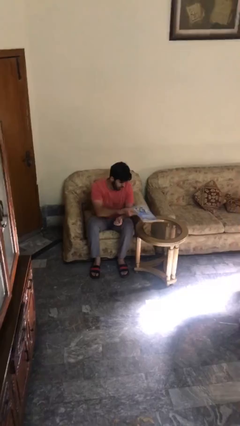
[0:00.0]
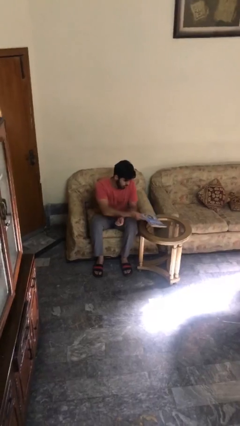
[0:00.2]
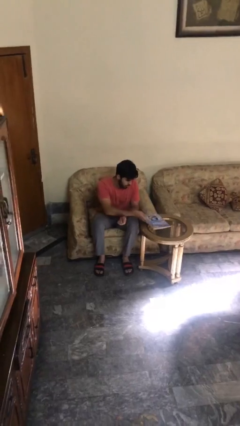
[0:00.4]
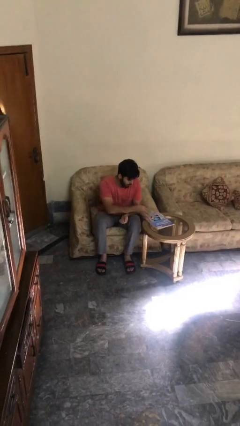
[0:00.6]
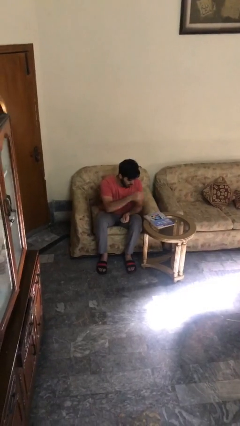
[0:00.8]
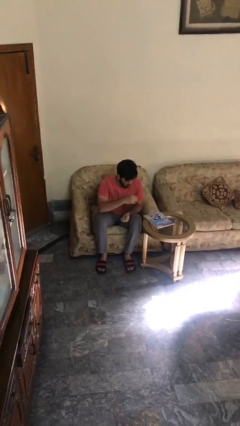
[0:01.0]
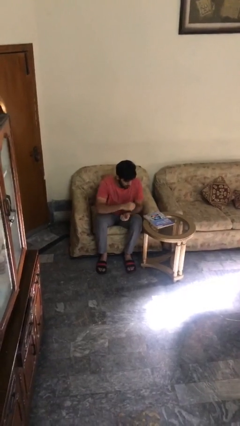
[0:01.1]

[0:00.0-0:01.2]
person puts down object on table

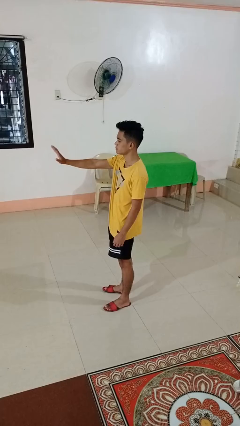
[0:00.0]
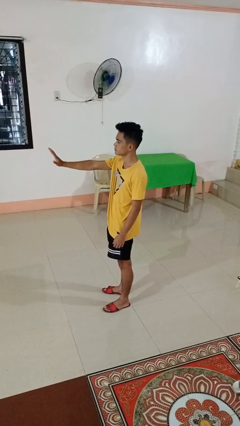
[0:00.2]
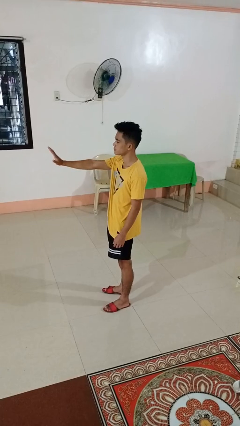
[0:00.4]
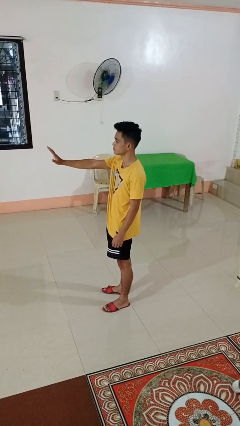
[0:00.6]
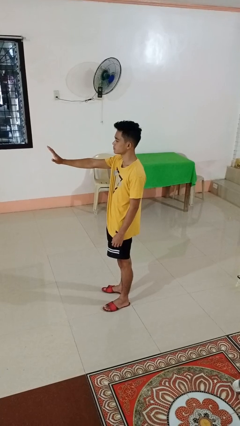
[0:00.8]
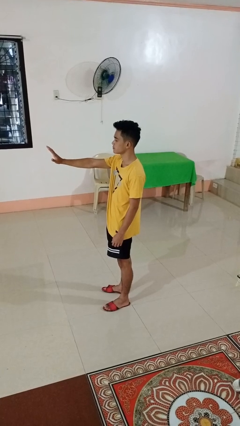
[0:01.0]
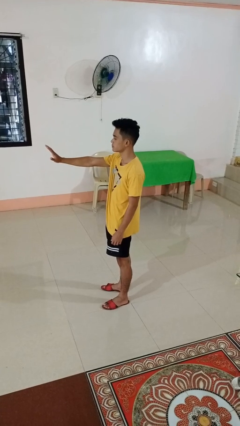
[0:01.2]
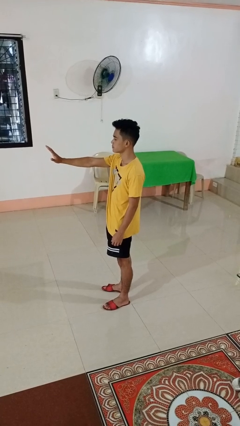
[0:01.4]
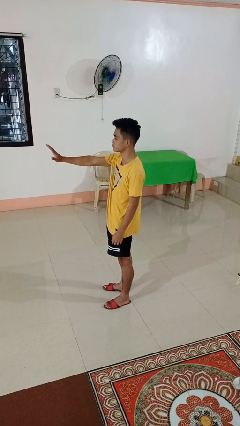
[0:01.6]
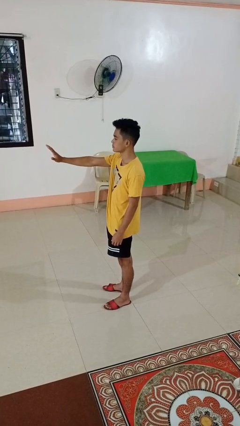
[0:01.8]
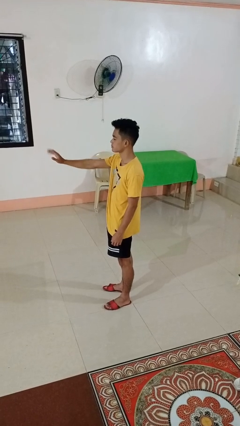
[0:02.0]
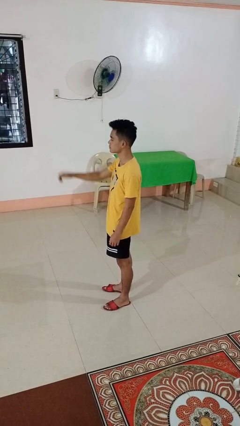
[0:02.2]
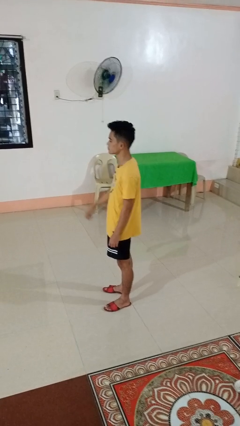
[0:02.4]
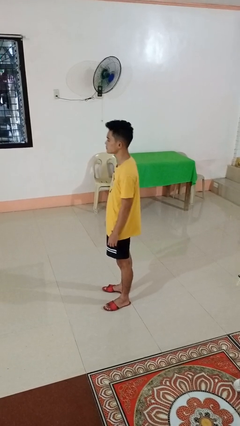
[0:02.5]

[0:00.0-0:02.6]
person gestures stop

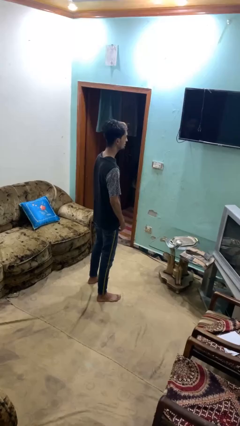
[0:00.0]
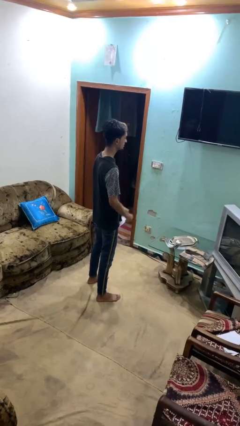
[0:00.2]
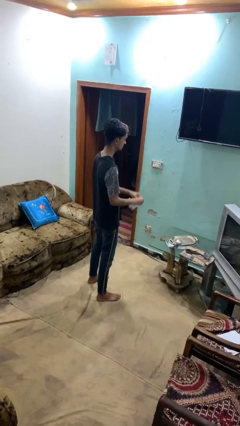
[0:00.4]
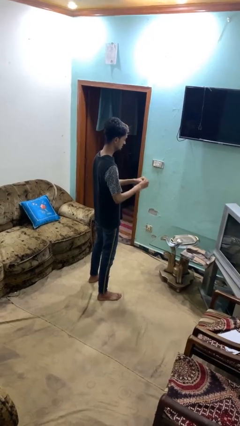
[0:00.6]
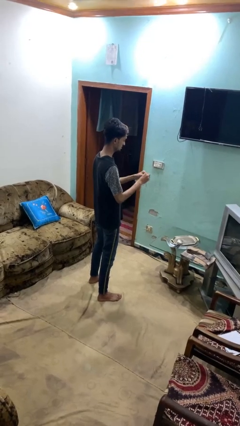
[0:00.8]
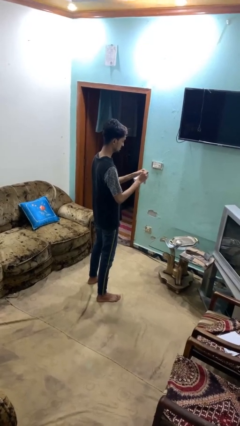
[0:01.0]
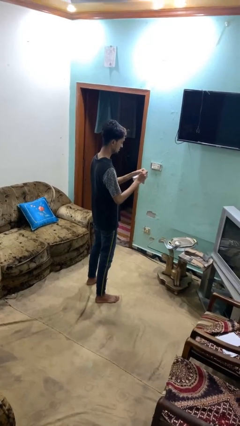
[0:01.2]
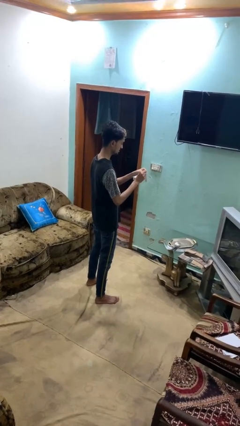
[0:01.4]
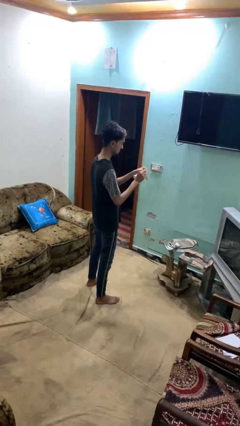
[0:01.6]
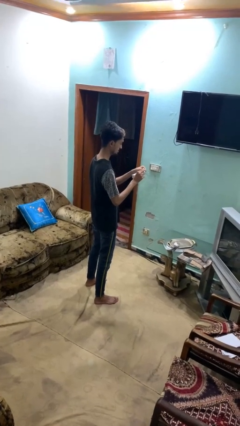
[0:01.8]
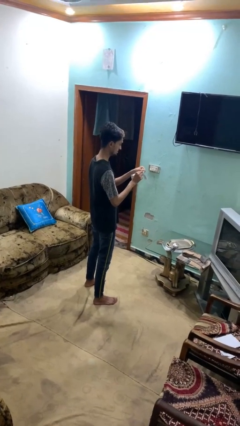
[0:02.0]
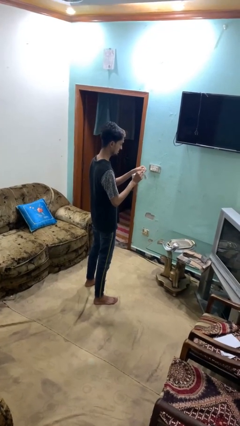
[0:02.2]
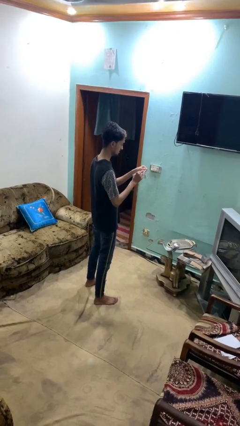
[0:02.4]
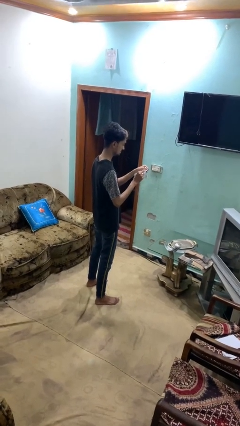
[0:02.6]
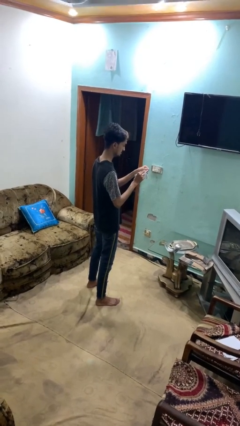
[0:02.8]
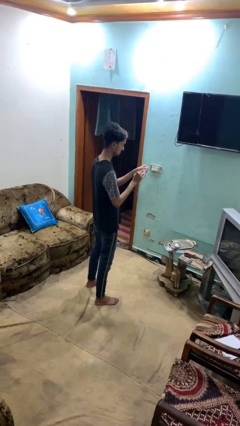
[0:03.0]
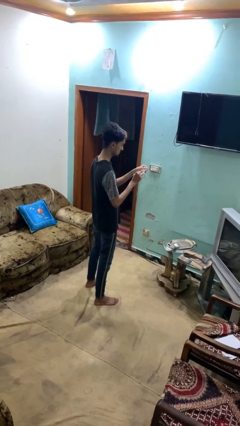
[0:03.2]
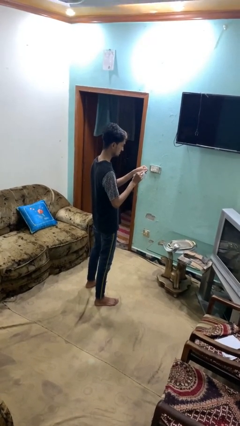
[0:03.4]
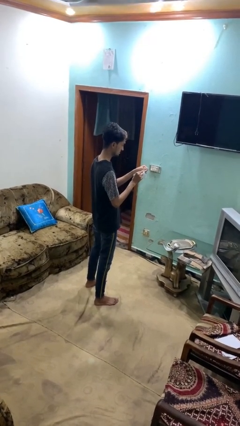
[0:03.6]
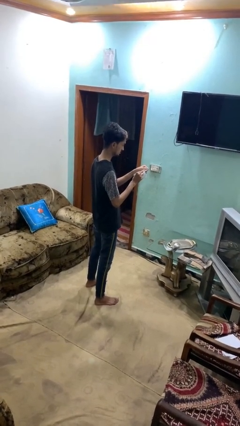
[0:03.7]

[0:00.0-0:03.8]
person tears paper

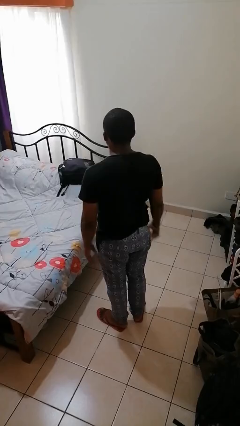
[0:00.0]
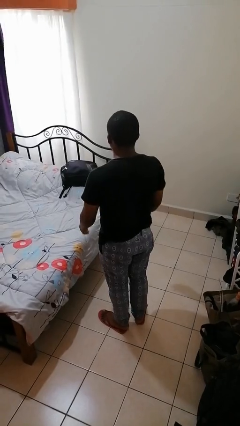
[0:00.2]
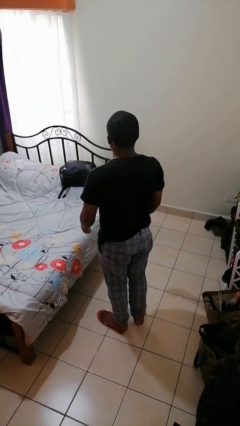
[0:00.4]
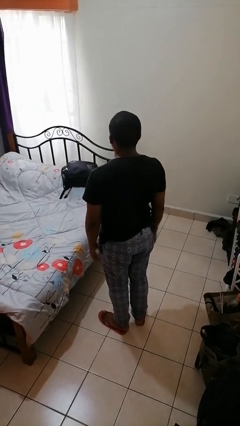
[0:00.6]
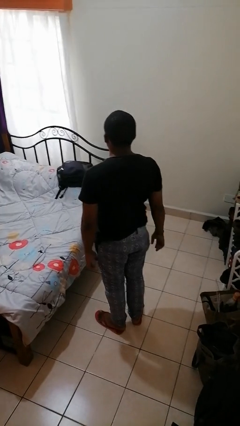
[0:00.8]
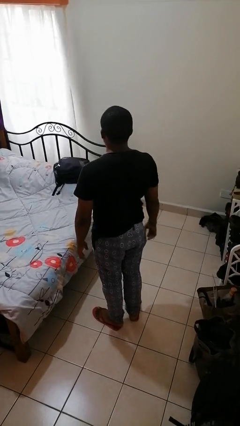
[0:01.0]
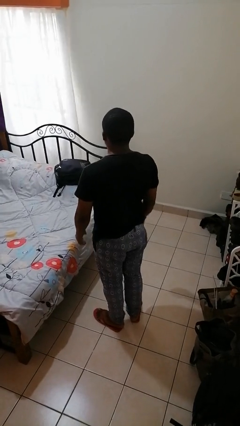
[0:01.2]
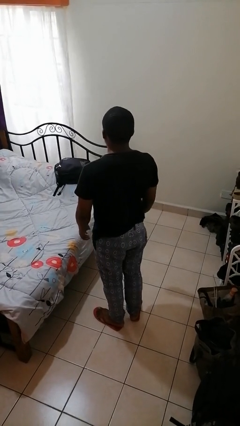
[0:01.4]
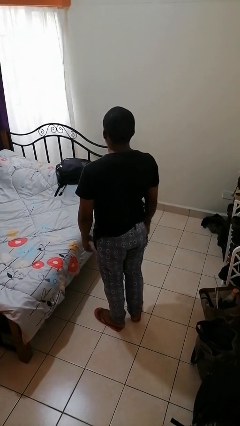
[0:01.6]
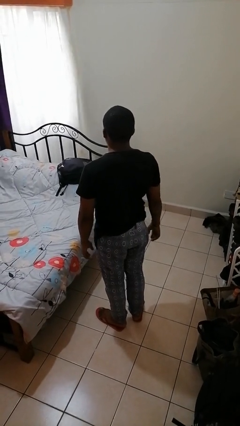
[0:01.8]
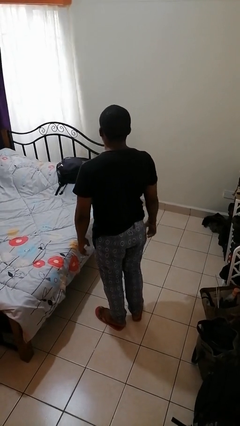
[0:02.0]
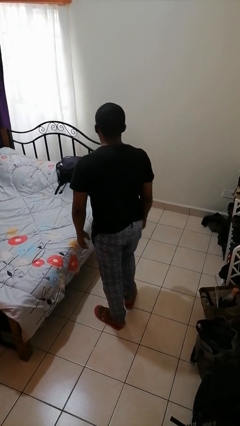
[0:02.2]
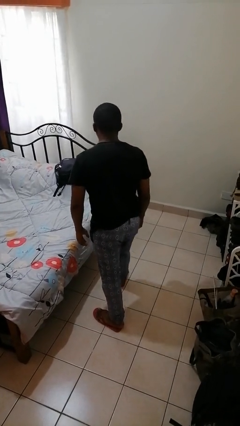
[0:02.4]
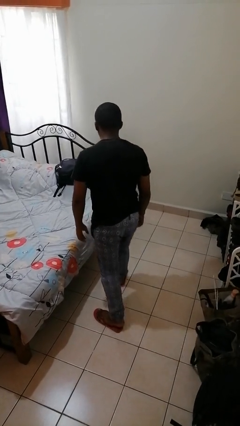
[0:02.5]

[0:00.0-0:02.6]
person throws object on bed

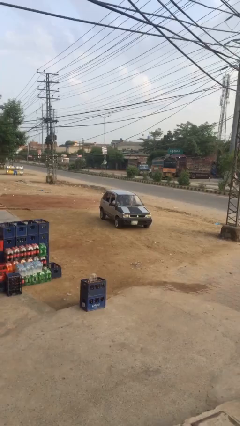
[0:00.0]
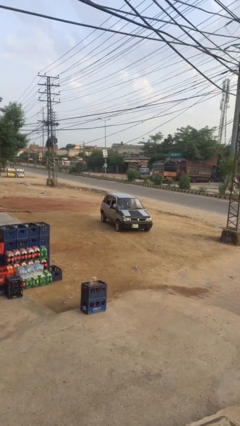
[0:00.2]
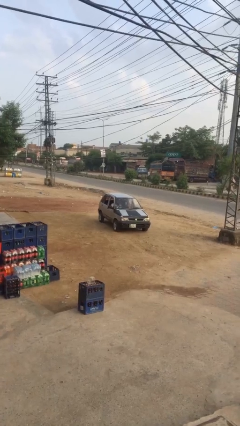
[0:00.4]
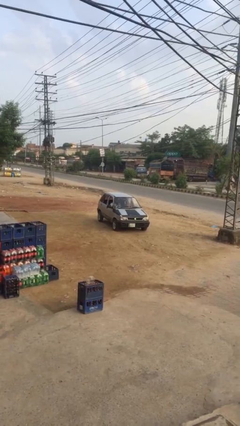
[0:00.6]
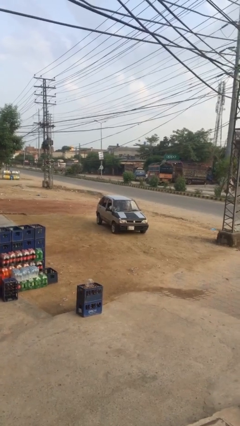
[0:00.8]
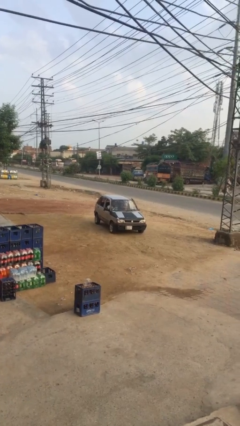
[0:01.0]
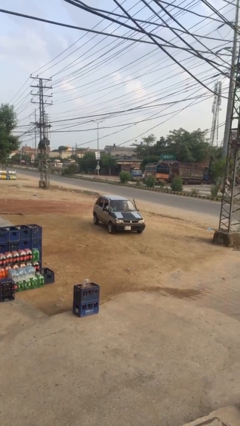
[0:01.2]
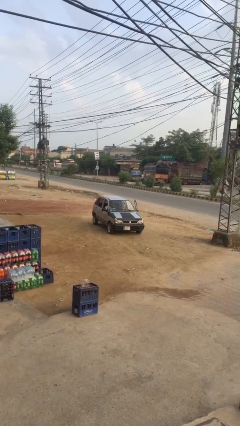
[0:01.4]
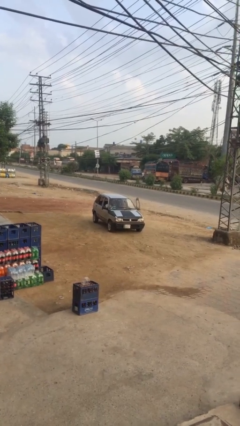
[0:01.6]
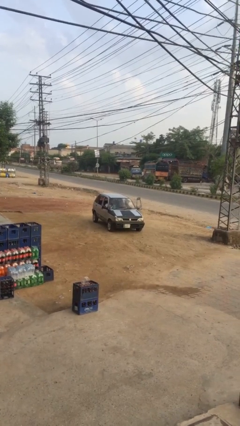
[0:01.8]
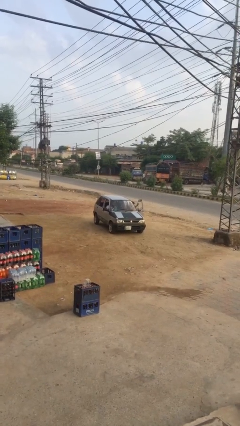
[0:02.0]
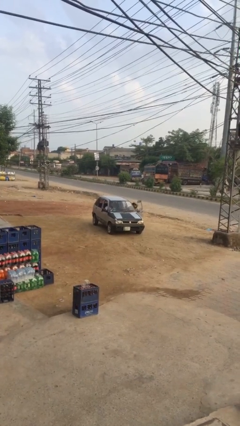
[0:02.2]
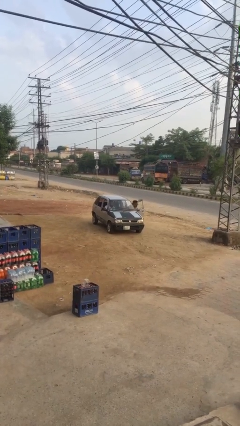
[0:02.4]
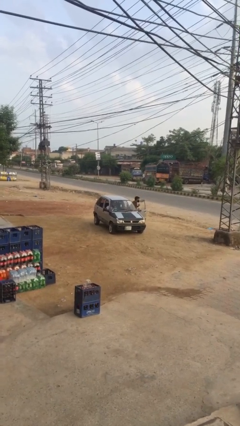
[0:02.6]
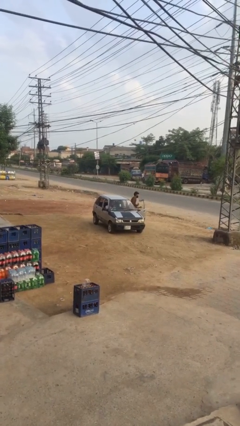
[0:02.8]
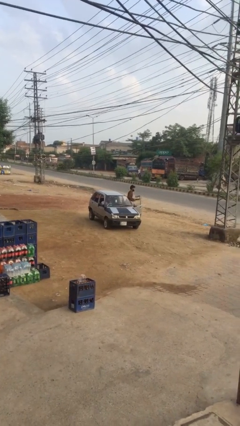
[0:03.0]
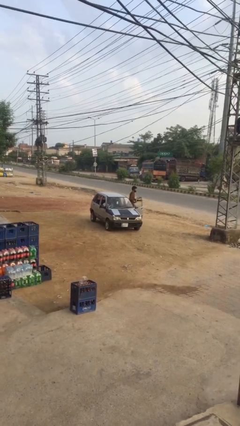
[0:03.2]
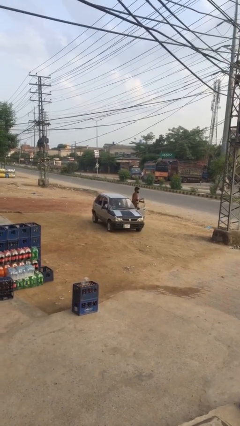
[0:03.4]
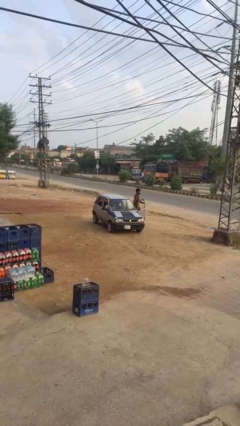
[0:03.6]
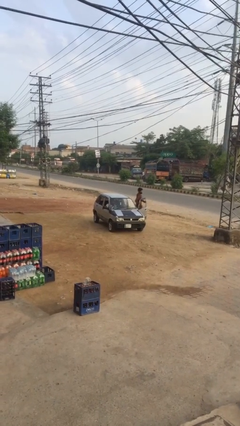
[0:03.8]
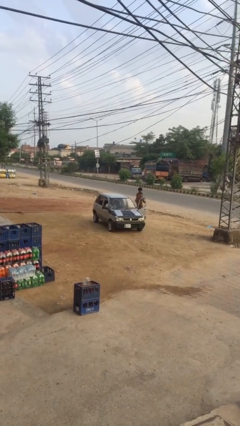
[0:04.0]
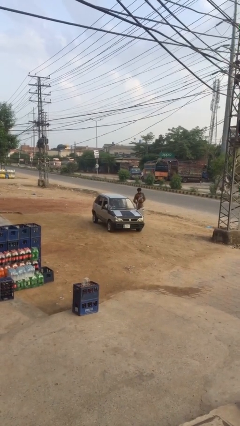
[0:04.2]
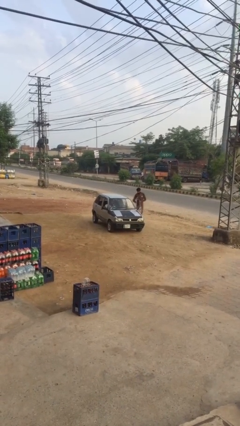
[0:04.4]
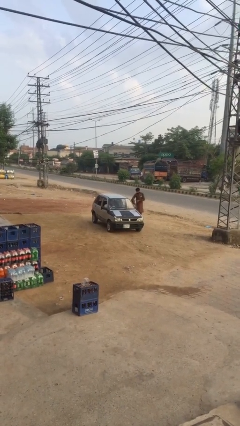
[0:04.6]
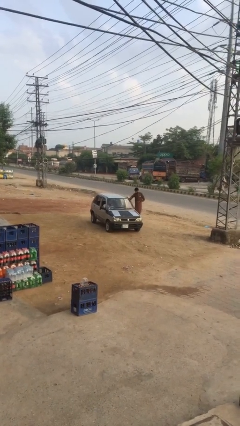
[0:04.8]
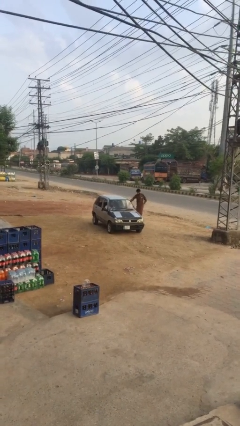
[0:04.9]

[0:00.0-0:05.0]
car drops off person

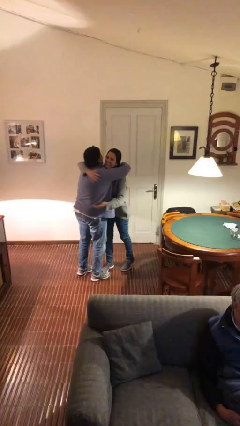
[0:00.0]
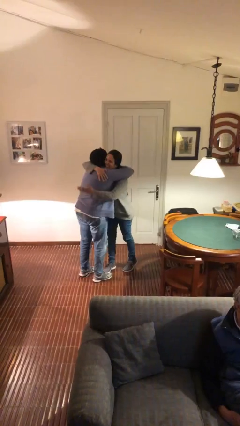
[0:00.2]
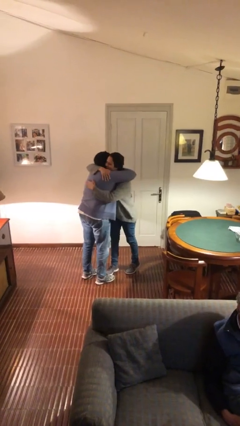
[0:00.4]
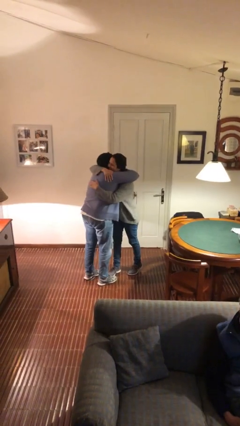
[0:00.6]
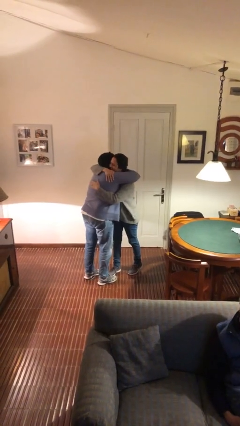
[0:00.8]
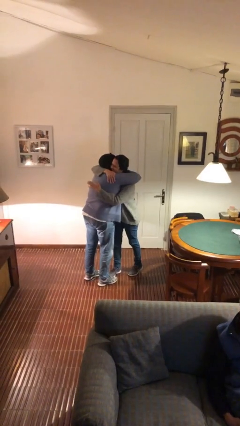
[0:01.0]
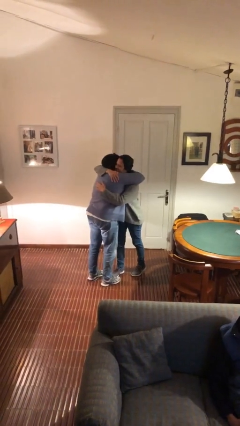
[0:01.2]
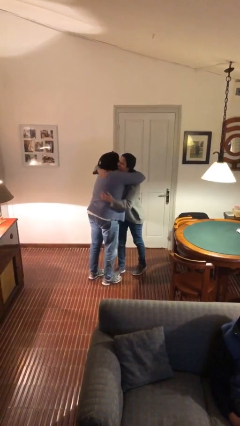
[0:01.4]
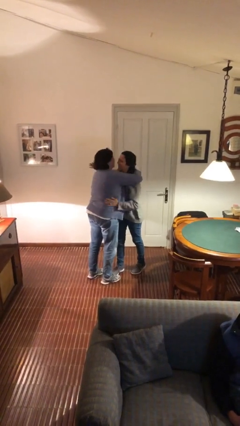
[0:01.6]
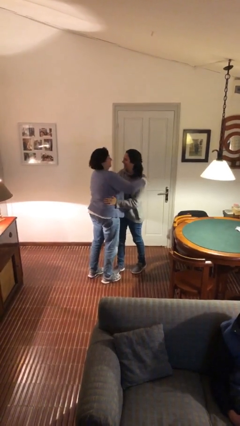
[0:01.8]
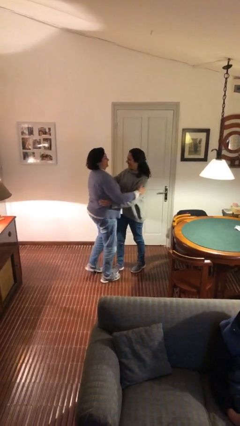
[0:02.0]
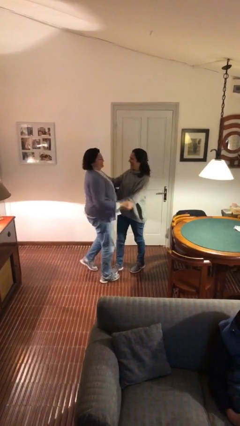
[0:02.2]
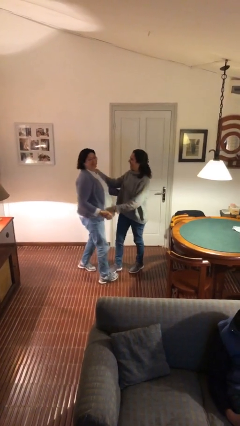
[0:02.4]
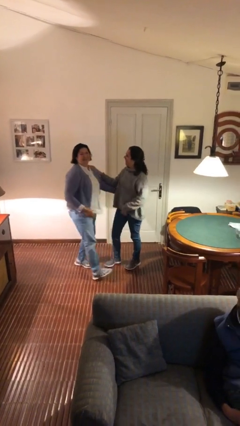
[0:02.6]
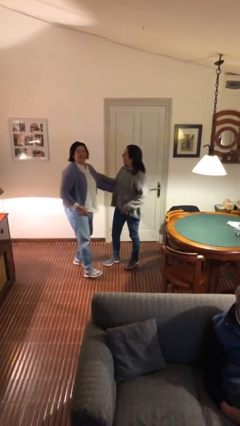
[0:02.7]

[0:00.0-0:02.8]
person embraces person
